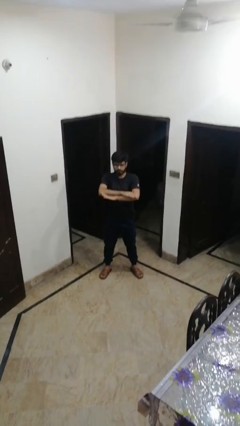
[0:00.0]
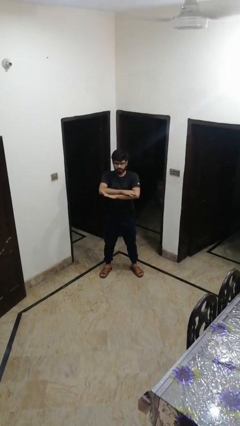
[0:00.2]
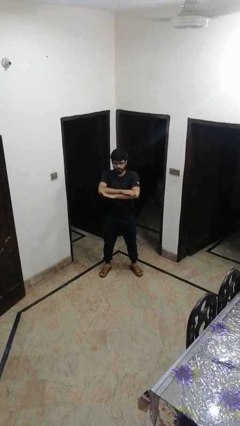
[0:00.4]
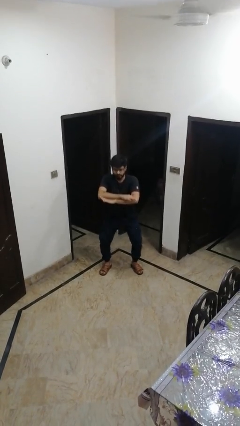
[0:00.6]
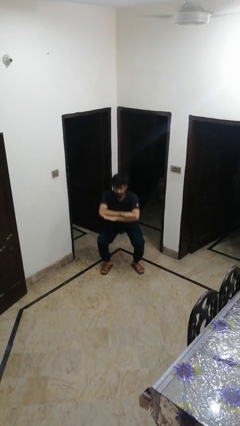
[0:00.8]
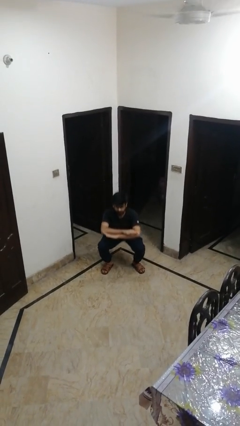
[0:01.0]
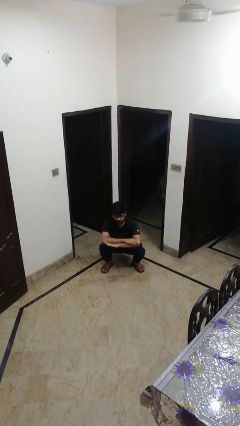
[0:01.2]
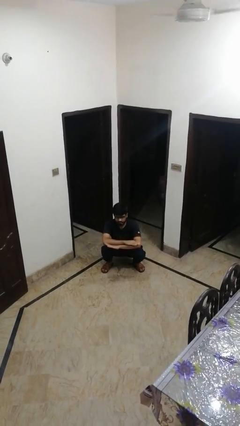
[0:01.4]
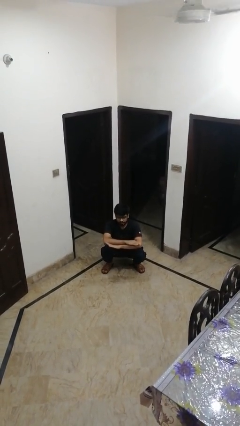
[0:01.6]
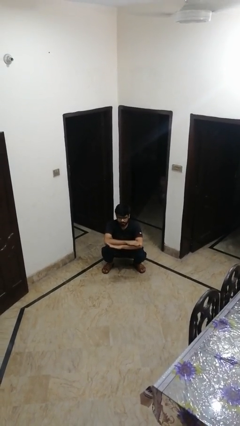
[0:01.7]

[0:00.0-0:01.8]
person squats

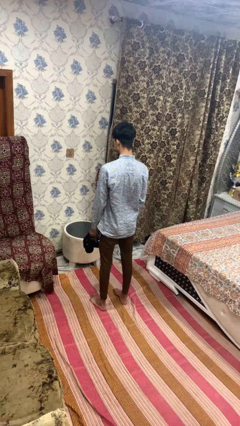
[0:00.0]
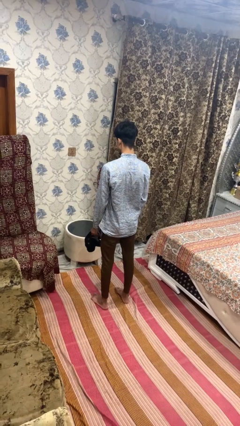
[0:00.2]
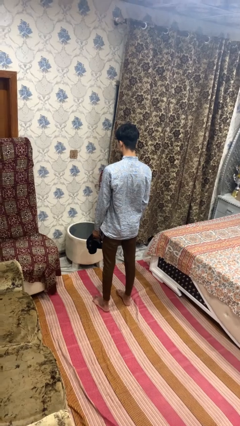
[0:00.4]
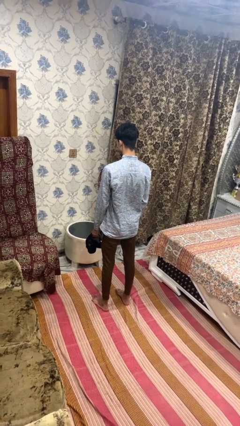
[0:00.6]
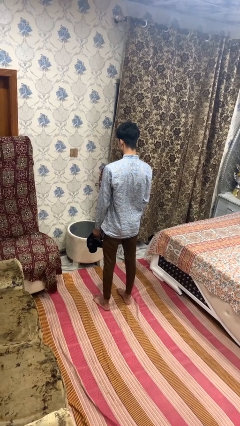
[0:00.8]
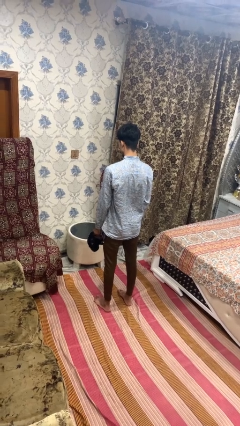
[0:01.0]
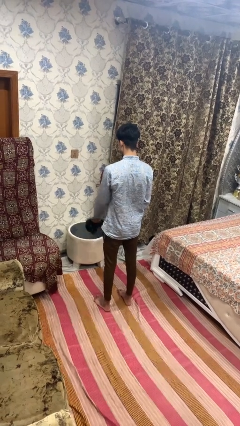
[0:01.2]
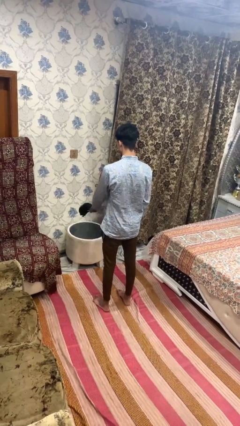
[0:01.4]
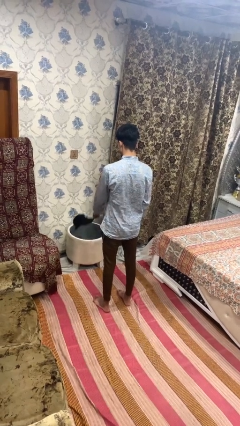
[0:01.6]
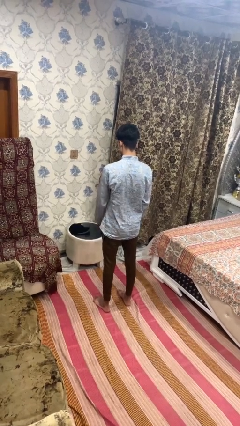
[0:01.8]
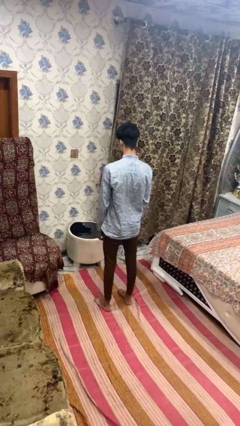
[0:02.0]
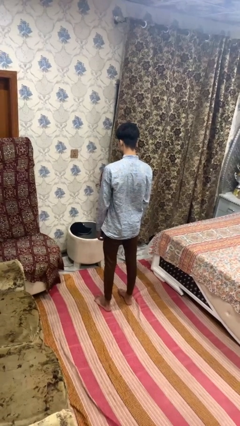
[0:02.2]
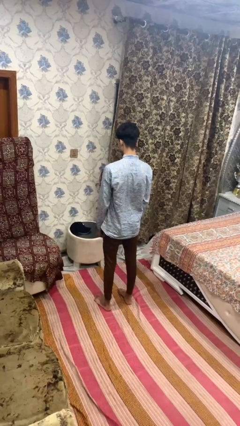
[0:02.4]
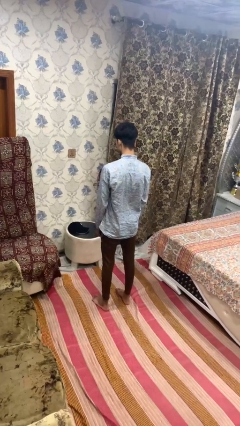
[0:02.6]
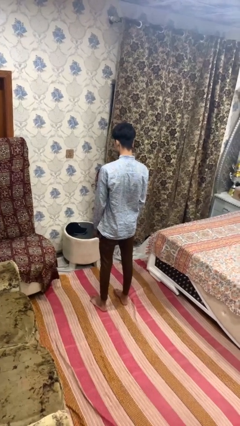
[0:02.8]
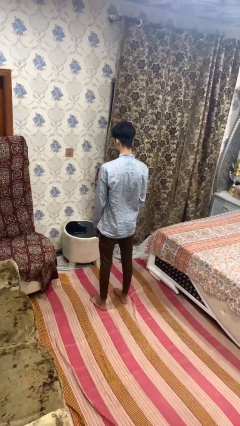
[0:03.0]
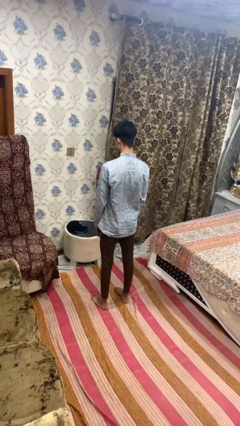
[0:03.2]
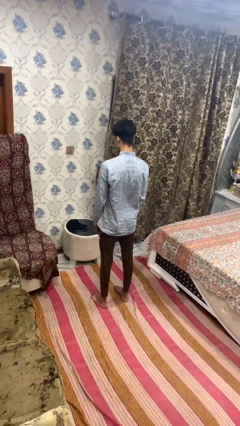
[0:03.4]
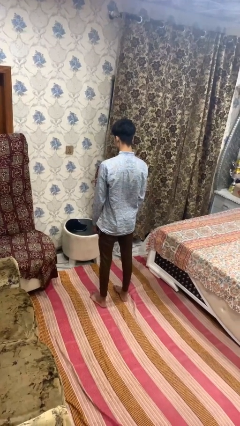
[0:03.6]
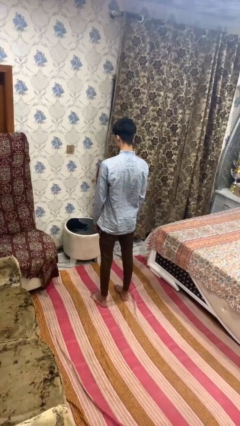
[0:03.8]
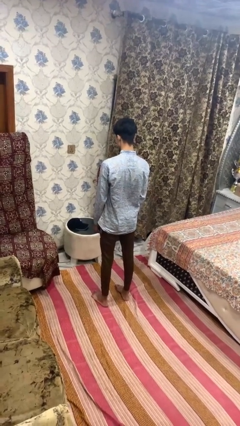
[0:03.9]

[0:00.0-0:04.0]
person throws object on table

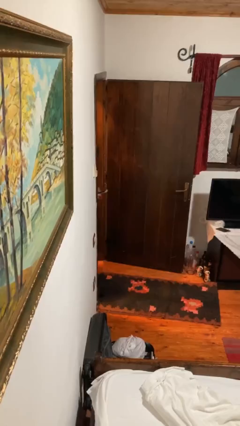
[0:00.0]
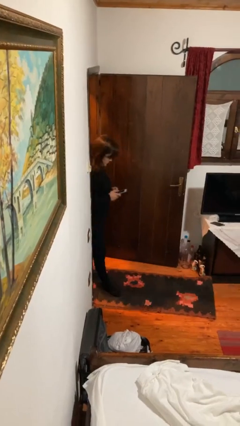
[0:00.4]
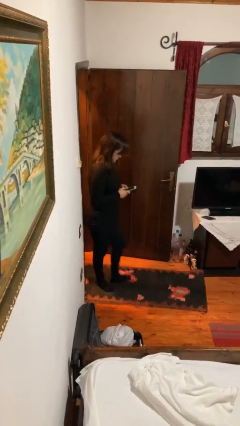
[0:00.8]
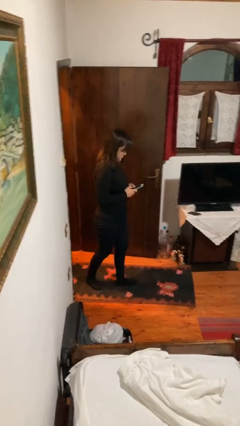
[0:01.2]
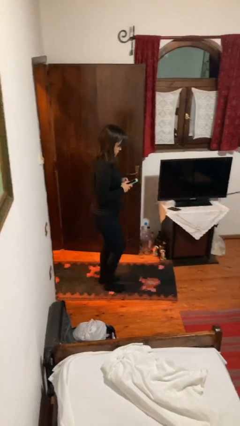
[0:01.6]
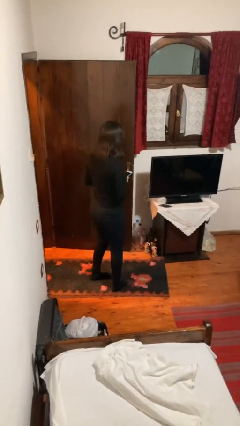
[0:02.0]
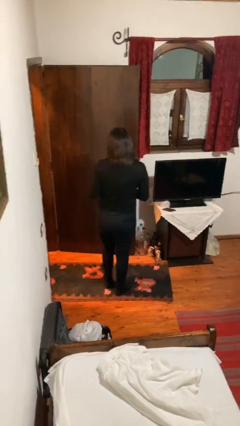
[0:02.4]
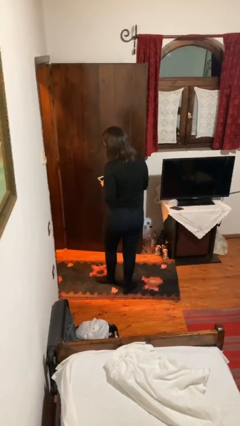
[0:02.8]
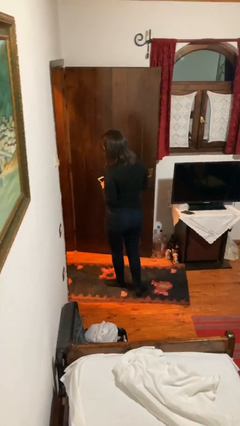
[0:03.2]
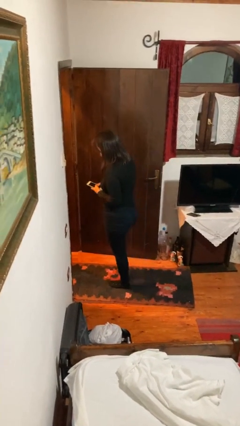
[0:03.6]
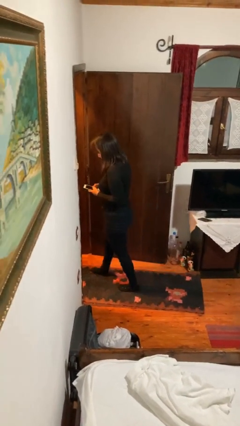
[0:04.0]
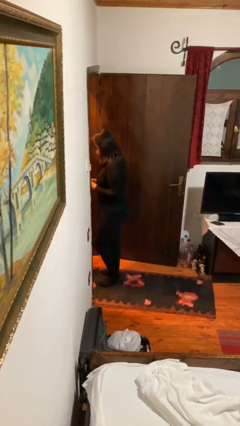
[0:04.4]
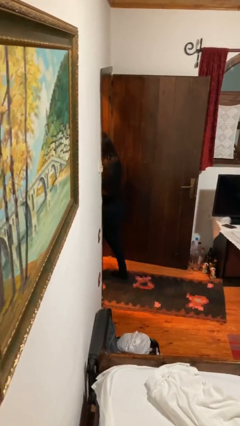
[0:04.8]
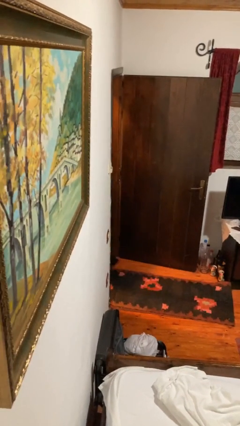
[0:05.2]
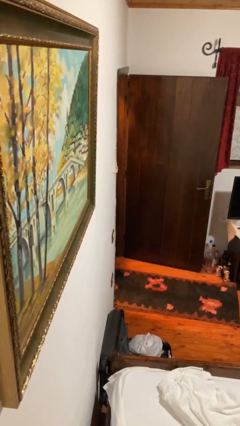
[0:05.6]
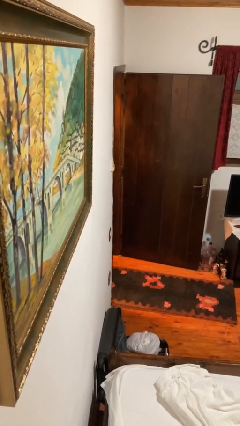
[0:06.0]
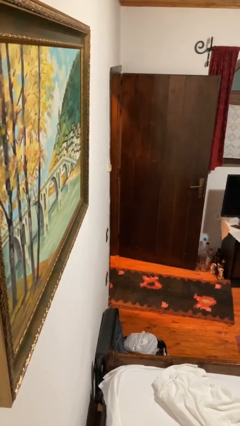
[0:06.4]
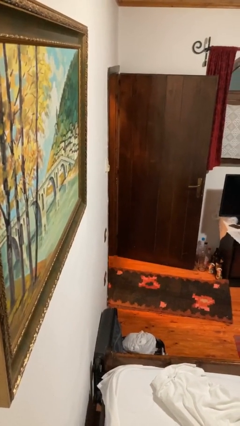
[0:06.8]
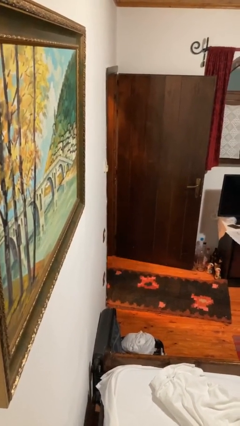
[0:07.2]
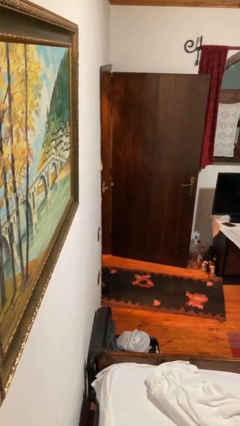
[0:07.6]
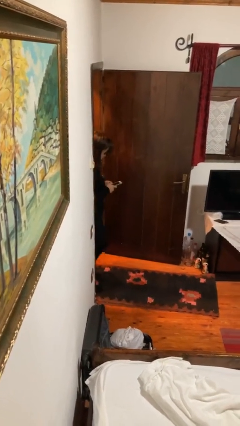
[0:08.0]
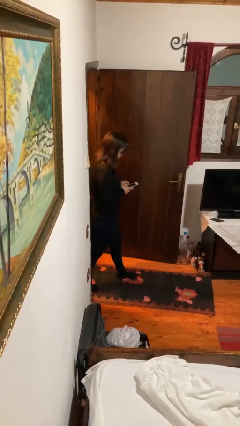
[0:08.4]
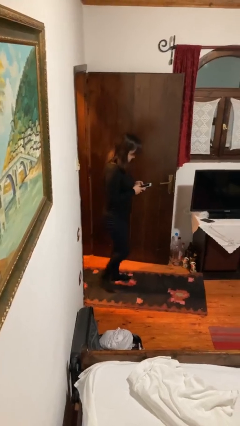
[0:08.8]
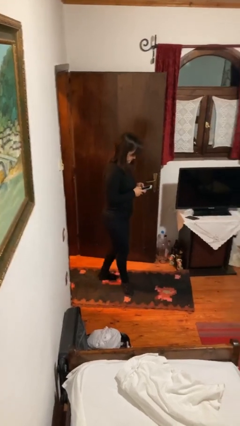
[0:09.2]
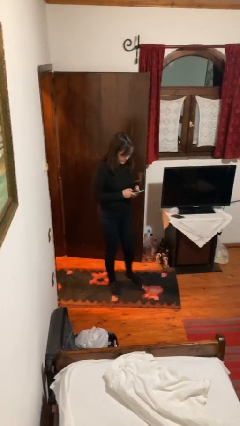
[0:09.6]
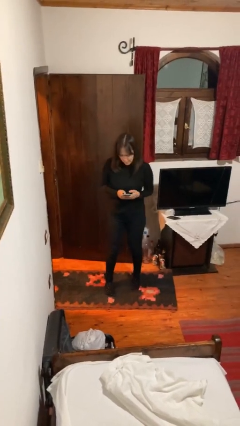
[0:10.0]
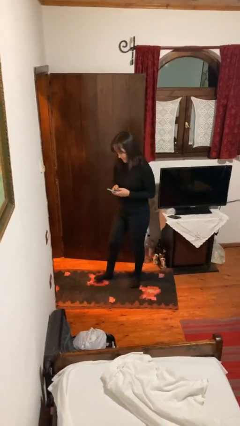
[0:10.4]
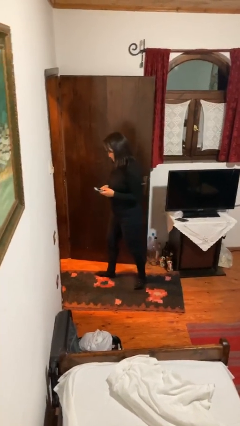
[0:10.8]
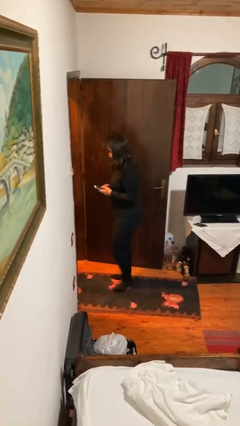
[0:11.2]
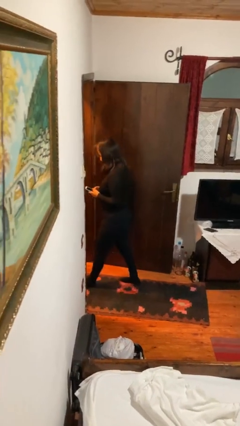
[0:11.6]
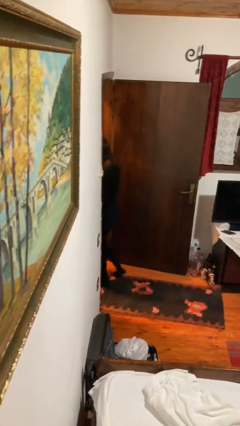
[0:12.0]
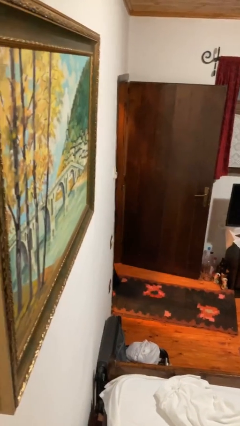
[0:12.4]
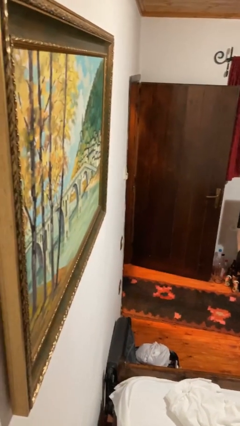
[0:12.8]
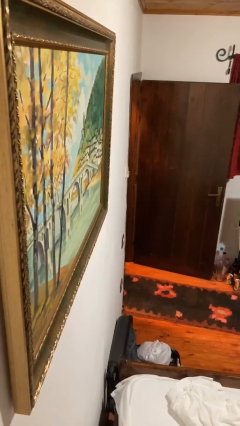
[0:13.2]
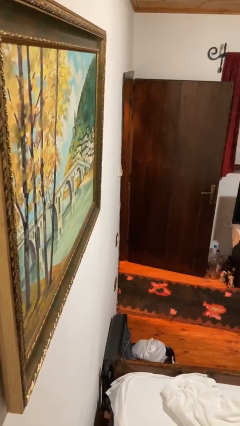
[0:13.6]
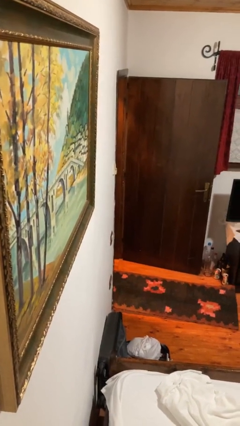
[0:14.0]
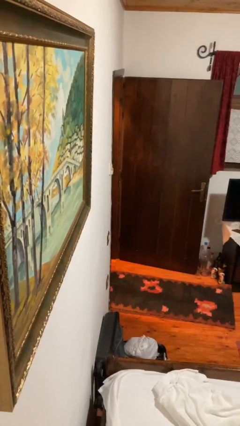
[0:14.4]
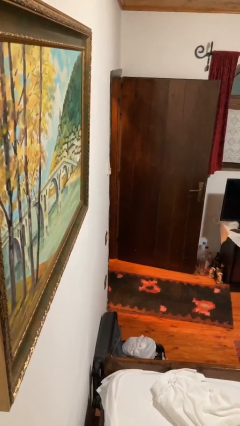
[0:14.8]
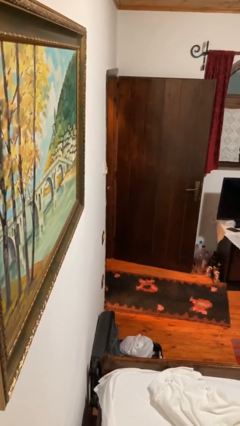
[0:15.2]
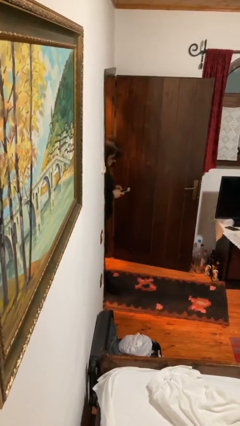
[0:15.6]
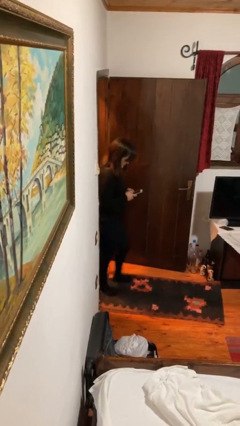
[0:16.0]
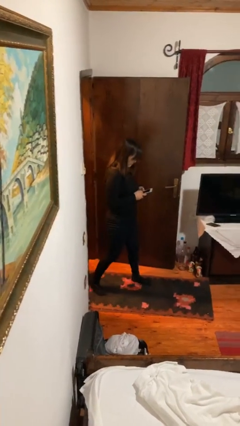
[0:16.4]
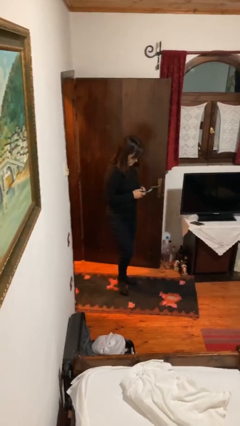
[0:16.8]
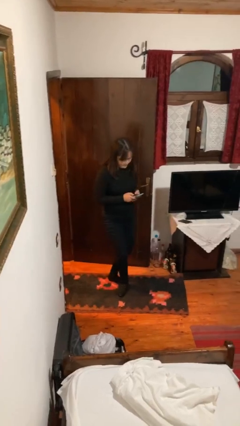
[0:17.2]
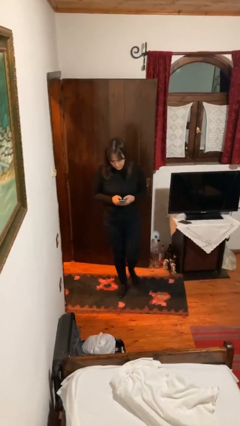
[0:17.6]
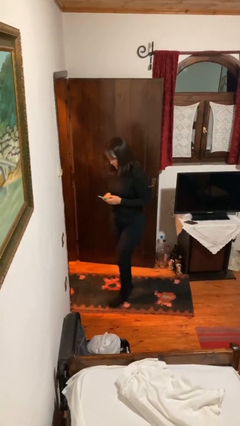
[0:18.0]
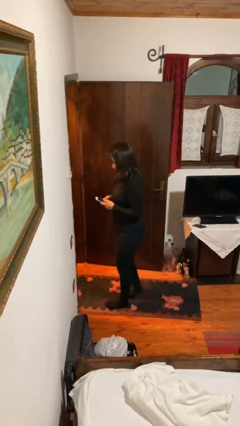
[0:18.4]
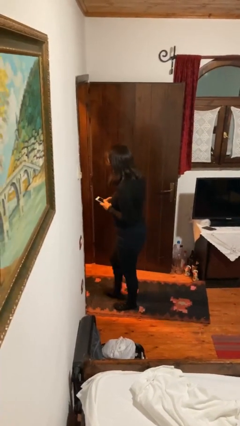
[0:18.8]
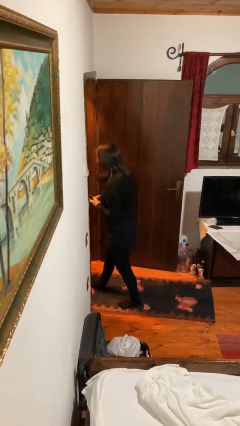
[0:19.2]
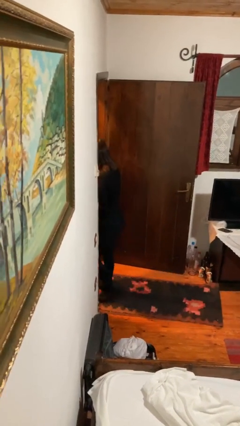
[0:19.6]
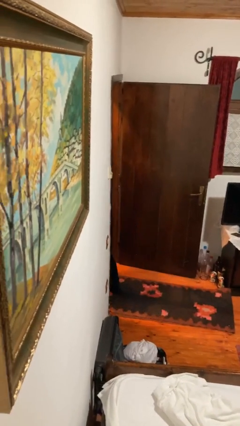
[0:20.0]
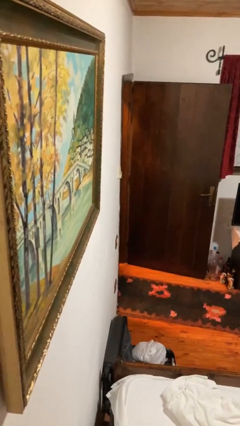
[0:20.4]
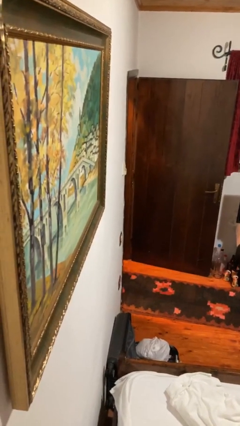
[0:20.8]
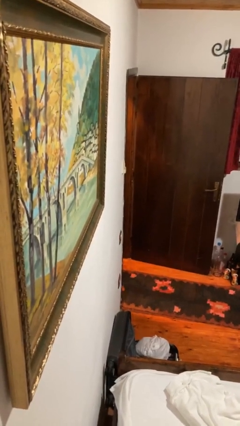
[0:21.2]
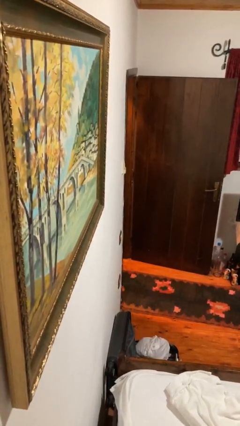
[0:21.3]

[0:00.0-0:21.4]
person texts on phone

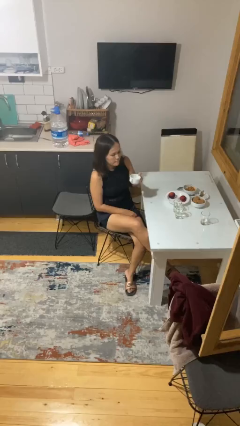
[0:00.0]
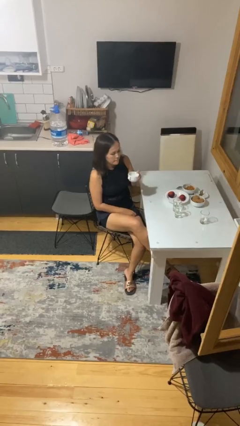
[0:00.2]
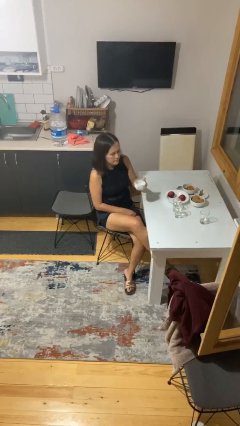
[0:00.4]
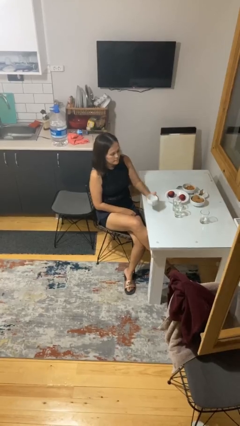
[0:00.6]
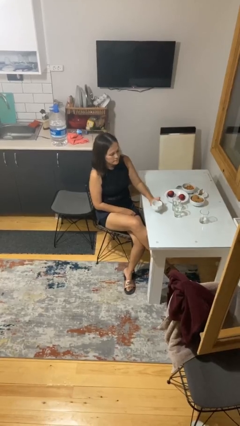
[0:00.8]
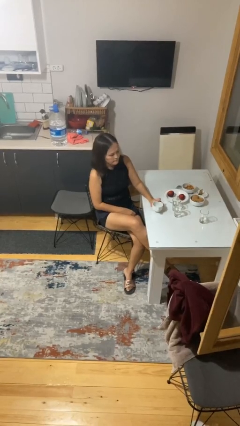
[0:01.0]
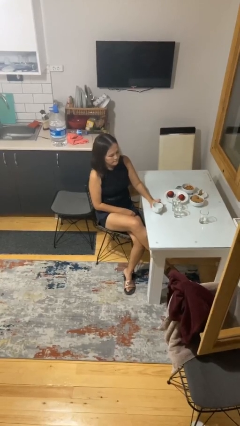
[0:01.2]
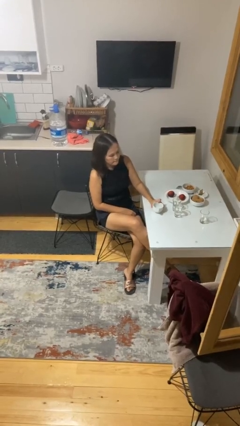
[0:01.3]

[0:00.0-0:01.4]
person puts down object on table
